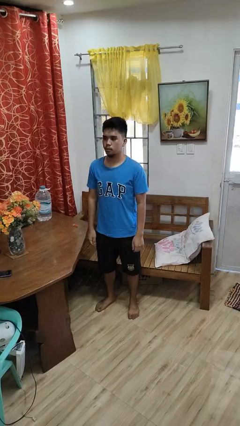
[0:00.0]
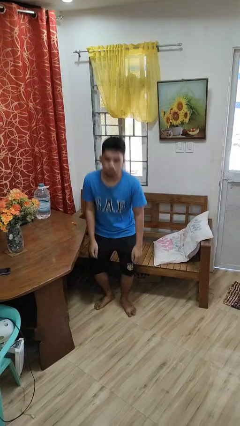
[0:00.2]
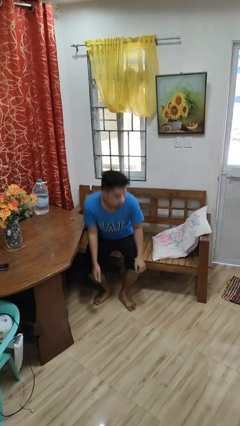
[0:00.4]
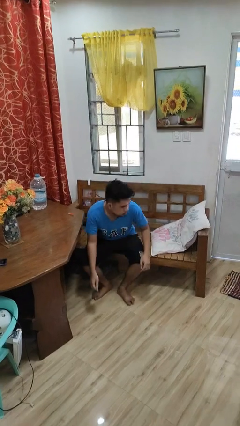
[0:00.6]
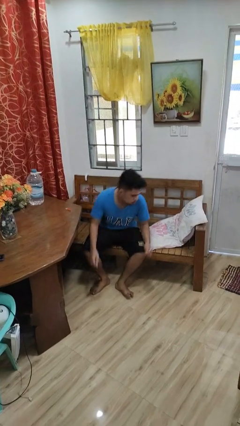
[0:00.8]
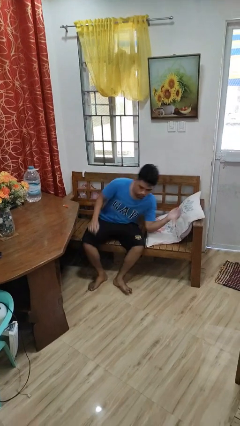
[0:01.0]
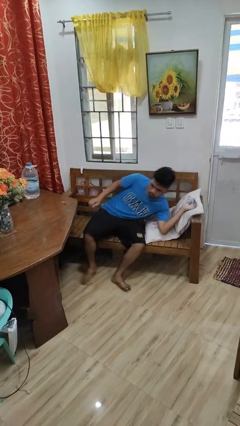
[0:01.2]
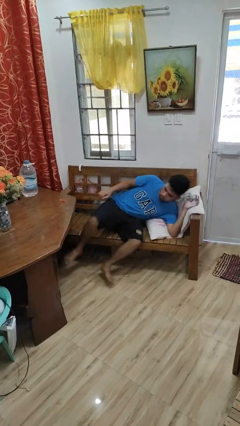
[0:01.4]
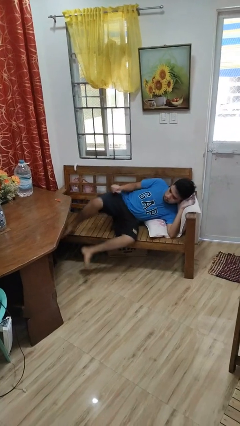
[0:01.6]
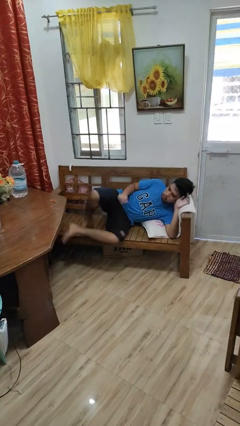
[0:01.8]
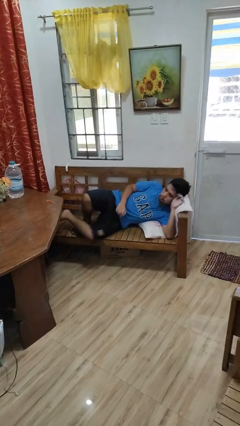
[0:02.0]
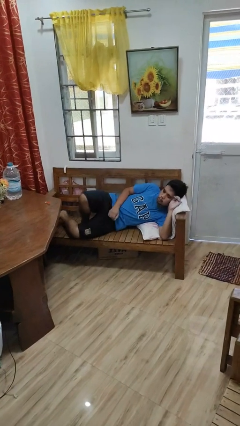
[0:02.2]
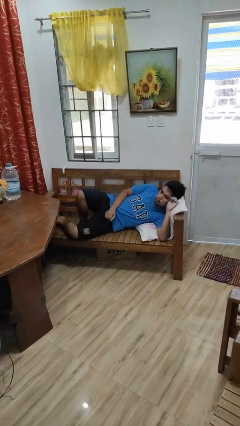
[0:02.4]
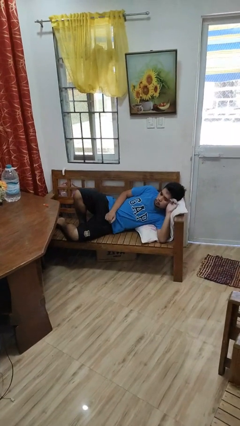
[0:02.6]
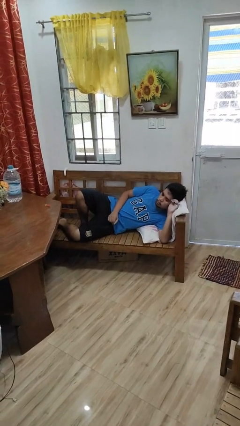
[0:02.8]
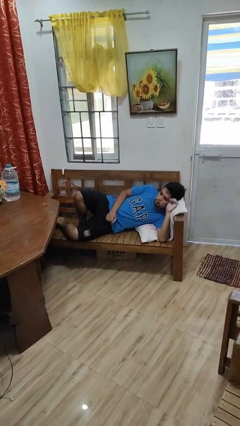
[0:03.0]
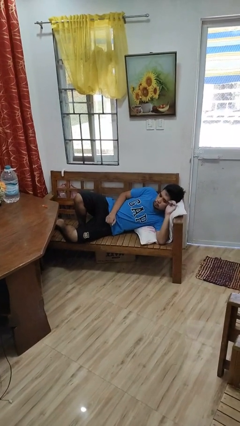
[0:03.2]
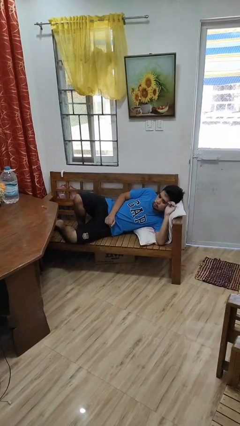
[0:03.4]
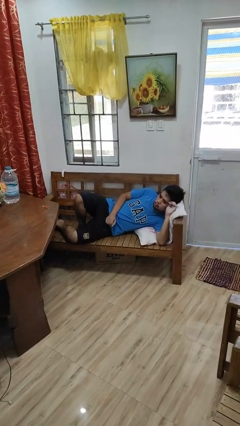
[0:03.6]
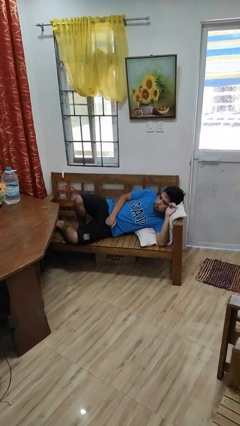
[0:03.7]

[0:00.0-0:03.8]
person lies down on couch

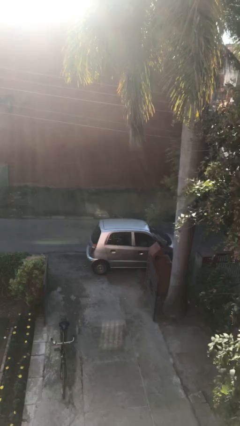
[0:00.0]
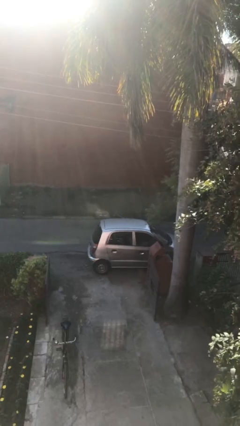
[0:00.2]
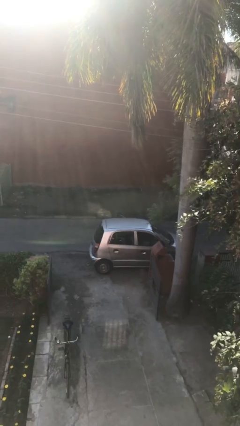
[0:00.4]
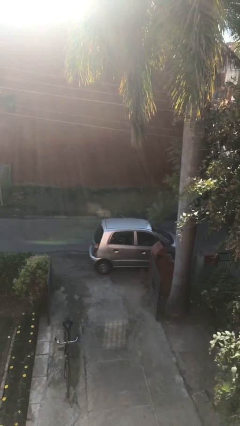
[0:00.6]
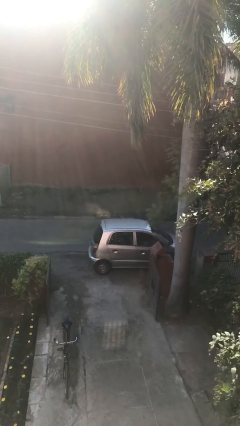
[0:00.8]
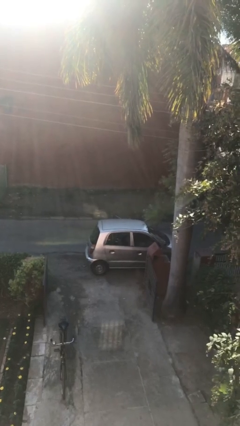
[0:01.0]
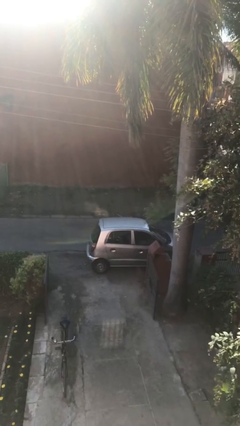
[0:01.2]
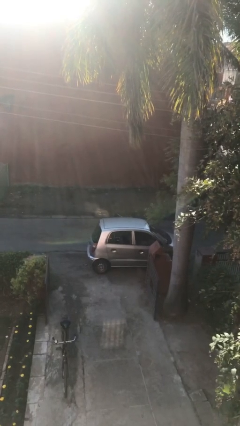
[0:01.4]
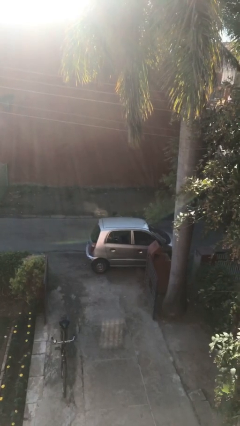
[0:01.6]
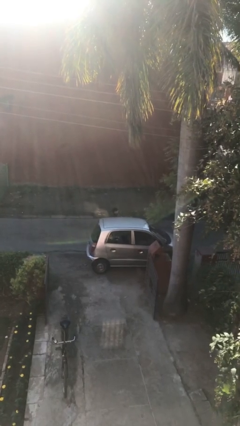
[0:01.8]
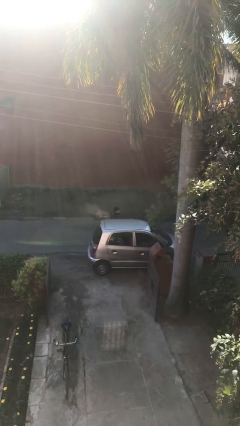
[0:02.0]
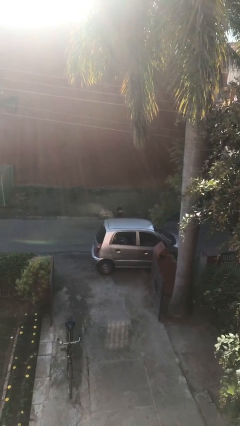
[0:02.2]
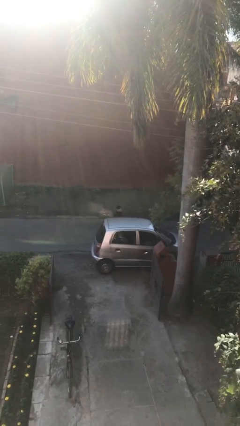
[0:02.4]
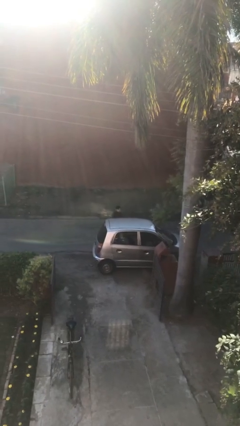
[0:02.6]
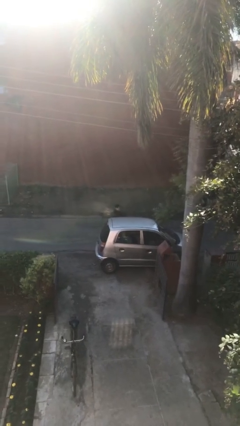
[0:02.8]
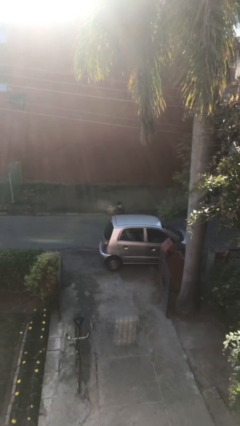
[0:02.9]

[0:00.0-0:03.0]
person exits car

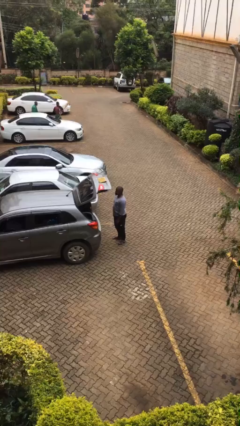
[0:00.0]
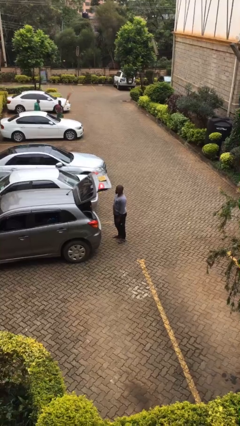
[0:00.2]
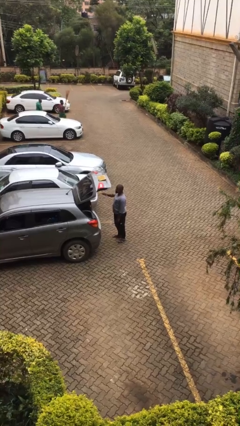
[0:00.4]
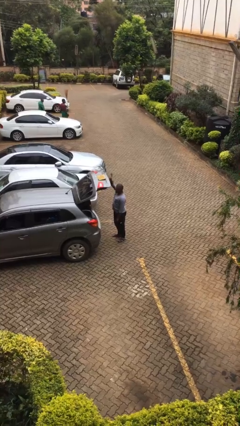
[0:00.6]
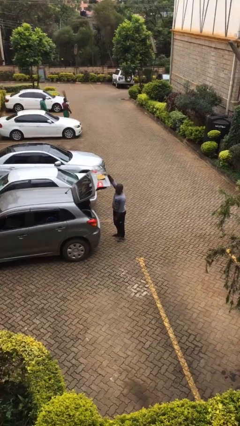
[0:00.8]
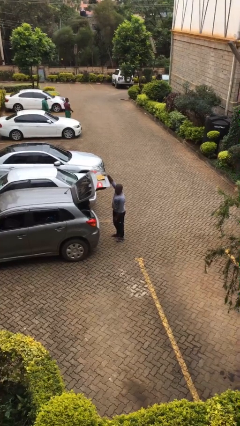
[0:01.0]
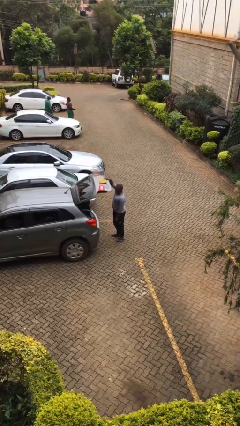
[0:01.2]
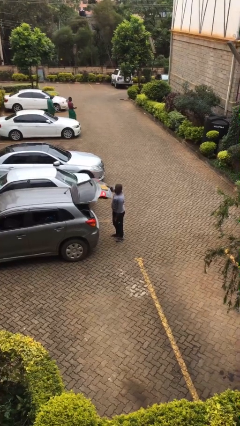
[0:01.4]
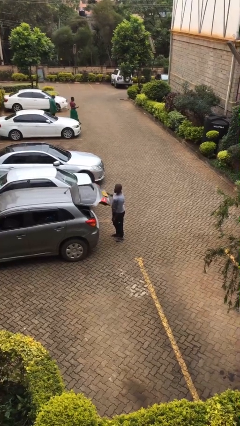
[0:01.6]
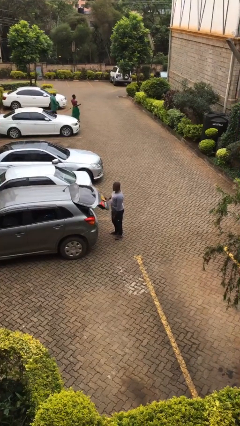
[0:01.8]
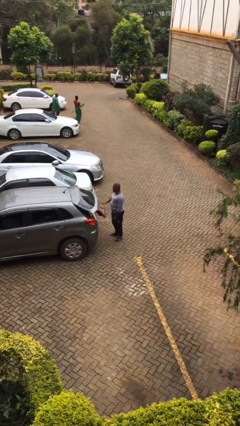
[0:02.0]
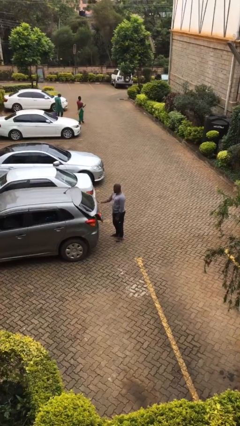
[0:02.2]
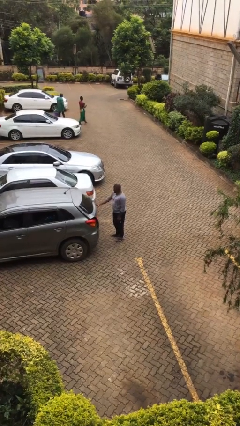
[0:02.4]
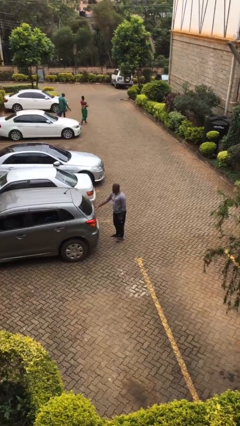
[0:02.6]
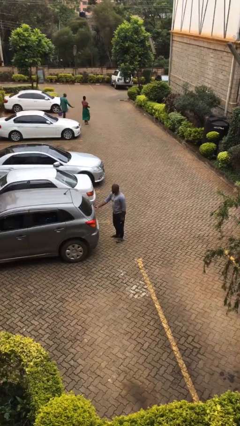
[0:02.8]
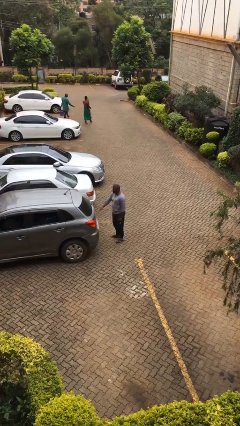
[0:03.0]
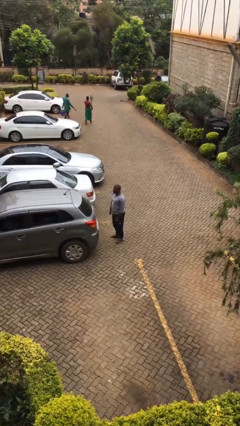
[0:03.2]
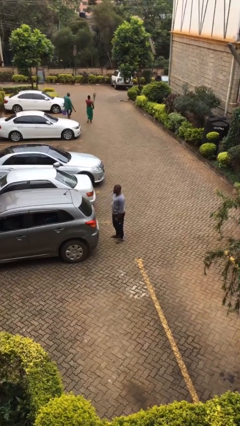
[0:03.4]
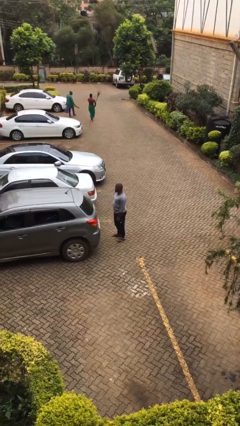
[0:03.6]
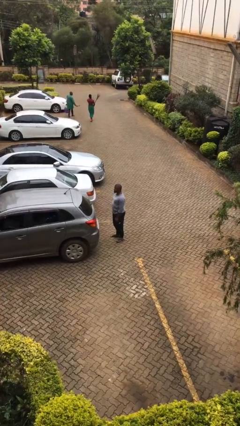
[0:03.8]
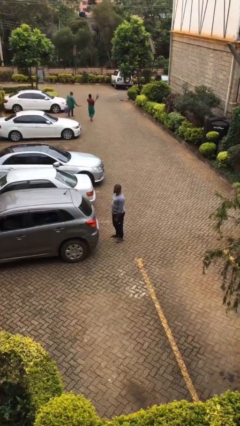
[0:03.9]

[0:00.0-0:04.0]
person closes car trunk

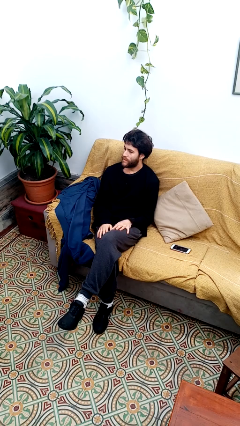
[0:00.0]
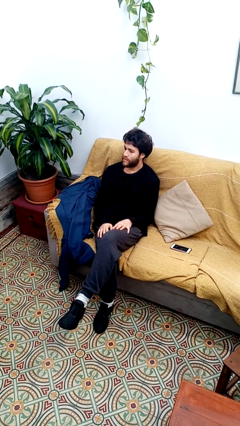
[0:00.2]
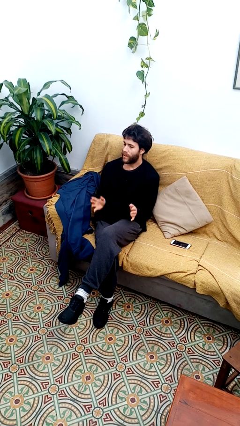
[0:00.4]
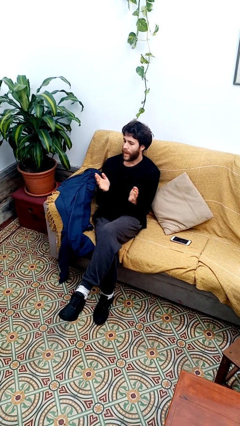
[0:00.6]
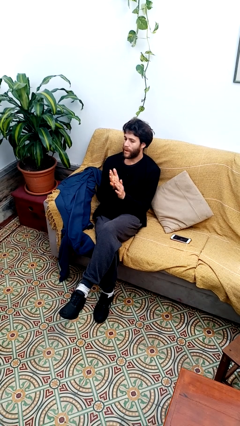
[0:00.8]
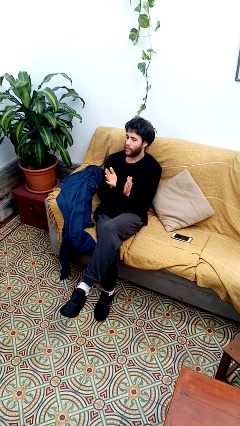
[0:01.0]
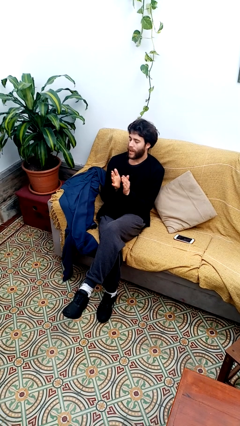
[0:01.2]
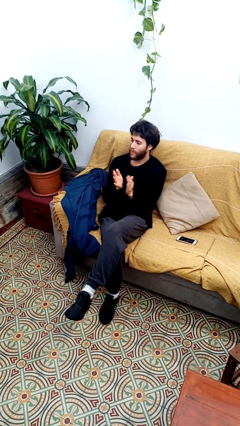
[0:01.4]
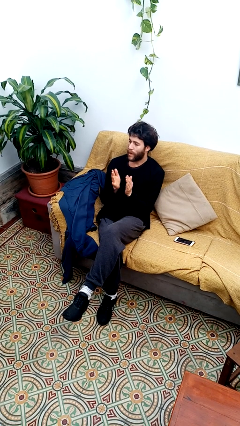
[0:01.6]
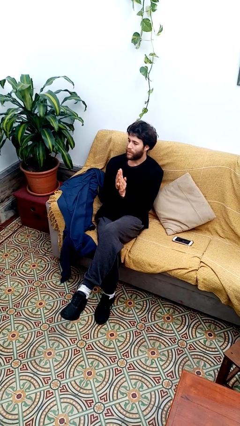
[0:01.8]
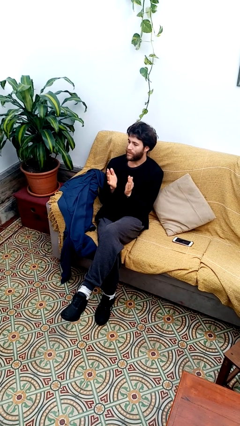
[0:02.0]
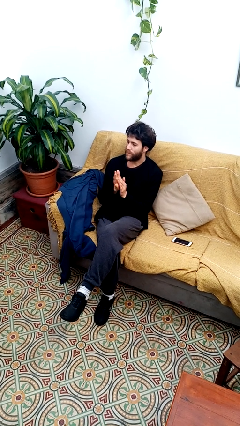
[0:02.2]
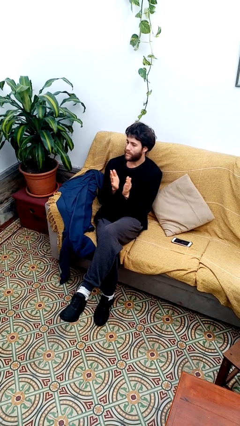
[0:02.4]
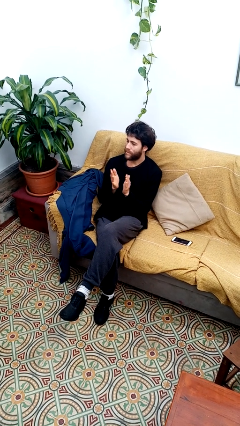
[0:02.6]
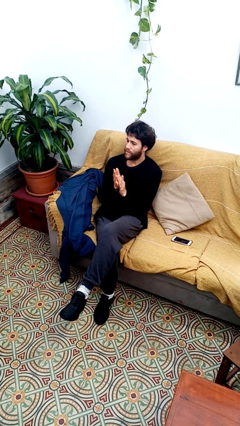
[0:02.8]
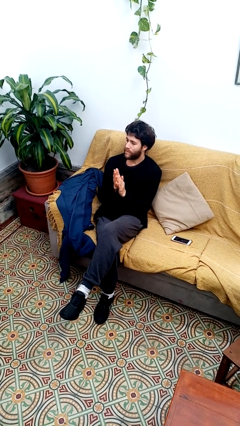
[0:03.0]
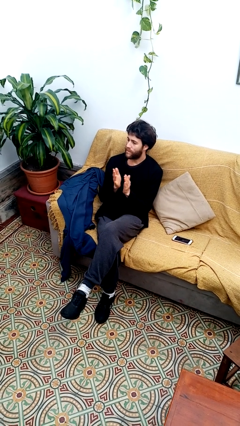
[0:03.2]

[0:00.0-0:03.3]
person claps hands

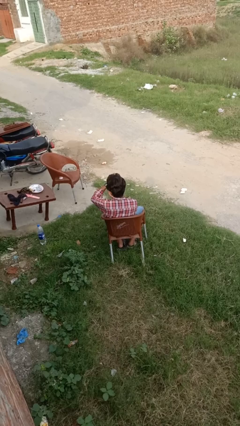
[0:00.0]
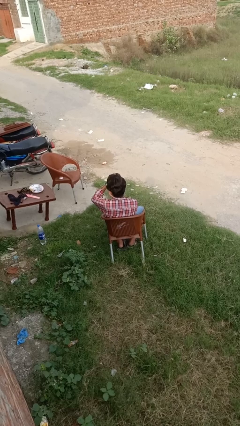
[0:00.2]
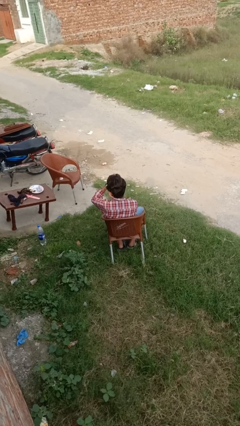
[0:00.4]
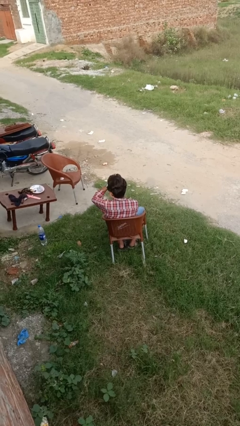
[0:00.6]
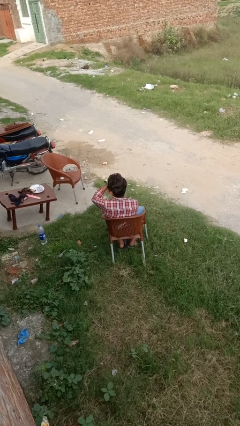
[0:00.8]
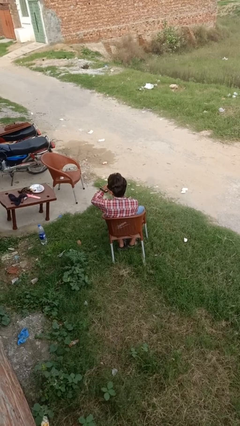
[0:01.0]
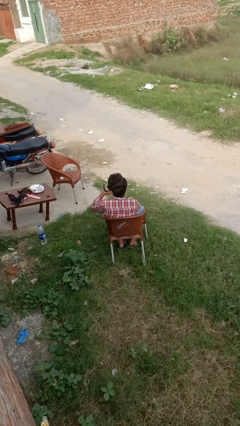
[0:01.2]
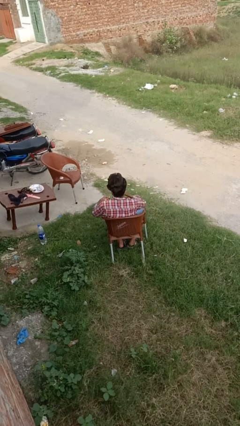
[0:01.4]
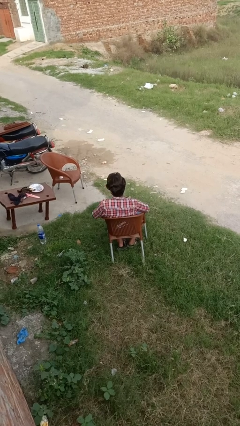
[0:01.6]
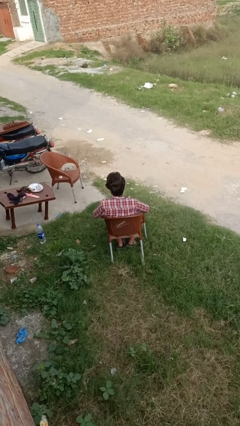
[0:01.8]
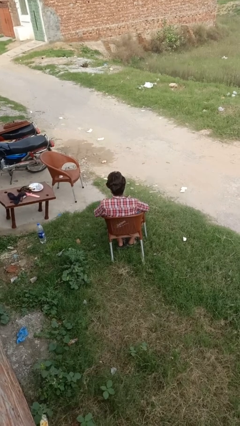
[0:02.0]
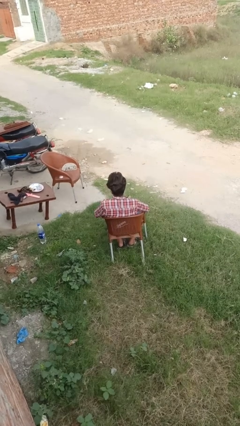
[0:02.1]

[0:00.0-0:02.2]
person takes off wristwatch

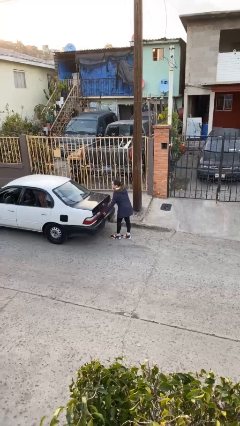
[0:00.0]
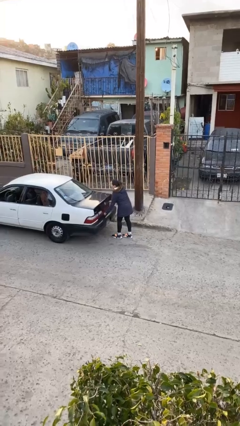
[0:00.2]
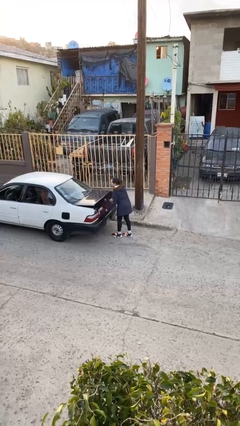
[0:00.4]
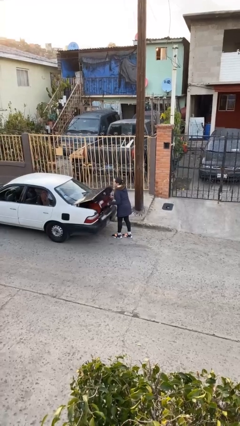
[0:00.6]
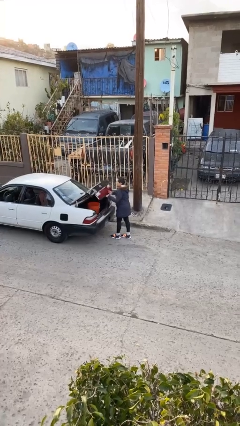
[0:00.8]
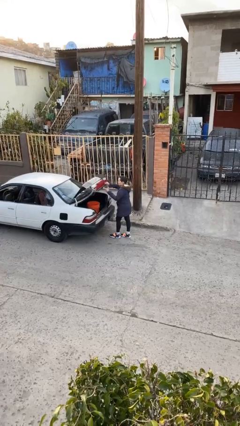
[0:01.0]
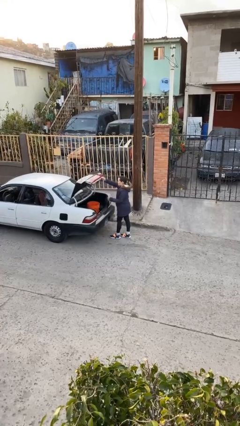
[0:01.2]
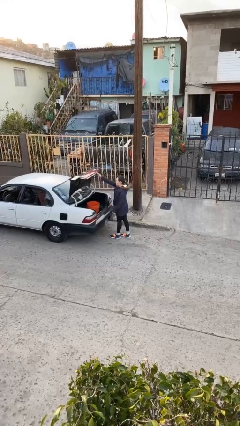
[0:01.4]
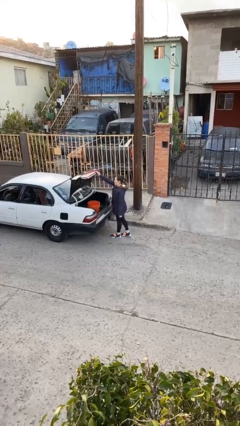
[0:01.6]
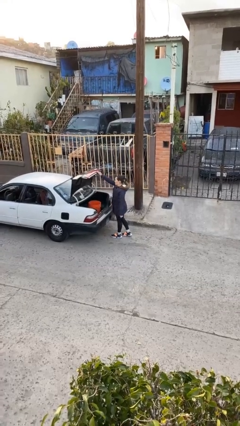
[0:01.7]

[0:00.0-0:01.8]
person opens car trunk
